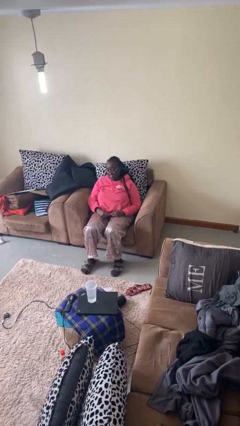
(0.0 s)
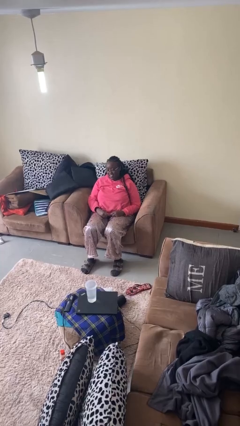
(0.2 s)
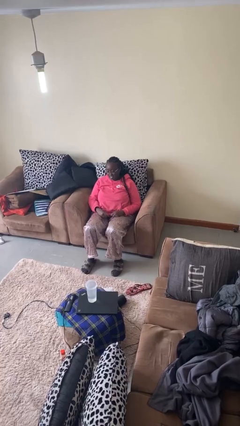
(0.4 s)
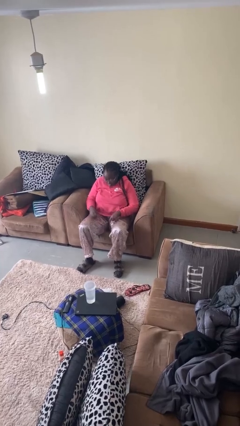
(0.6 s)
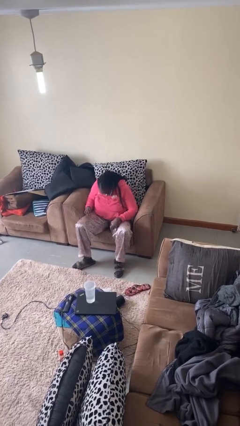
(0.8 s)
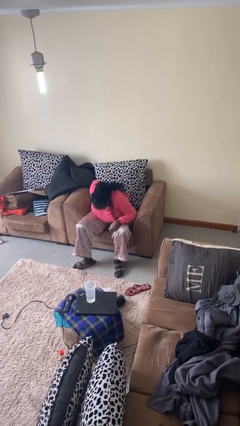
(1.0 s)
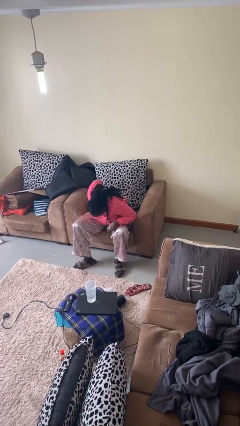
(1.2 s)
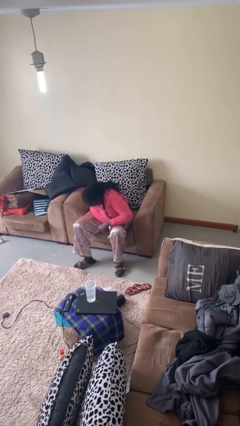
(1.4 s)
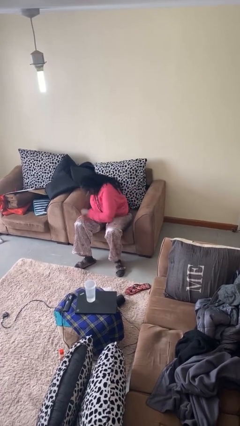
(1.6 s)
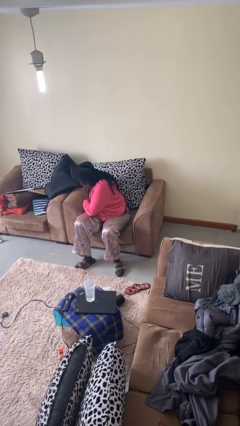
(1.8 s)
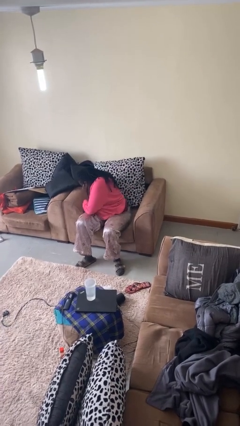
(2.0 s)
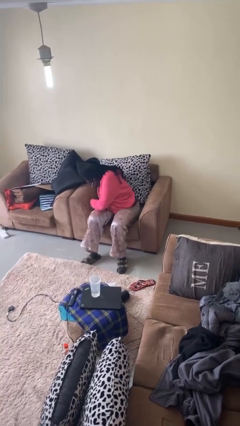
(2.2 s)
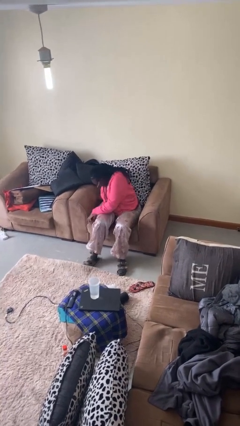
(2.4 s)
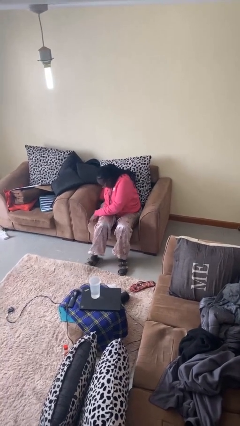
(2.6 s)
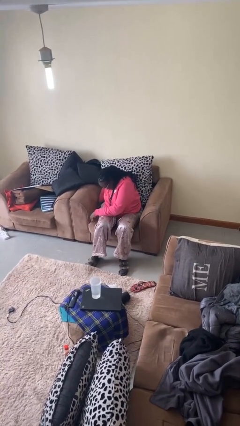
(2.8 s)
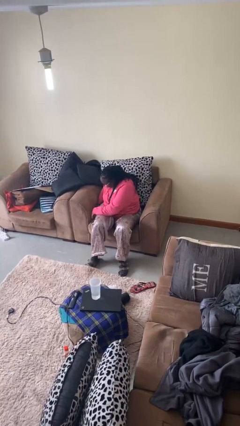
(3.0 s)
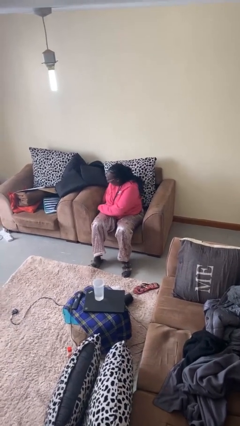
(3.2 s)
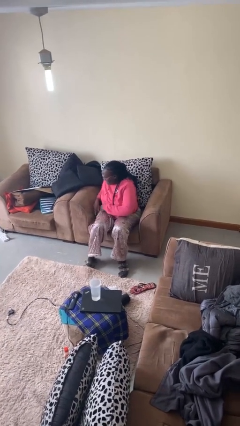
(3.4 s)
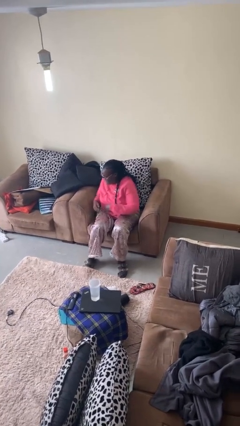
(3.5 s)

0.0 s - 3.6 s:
person searches in couch

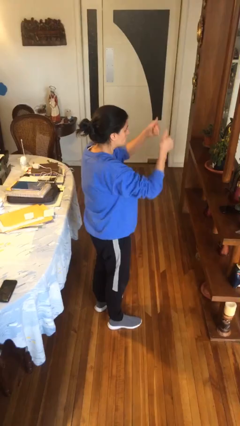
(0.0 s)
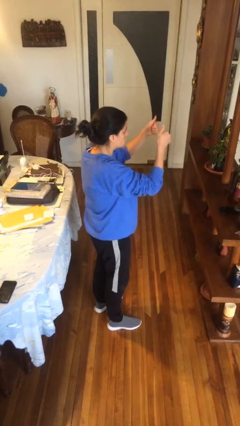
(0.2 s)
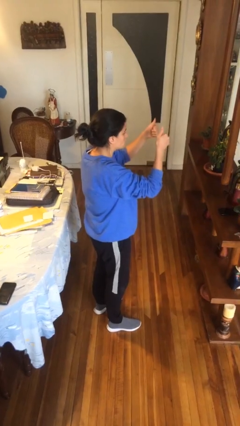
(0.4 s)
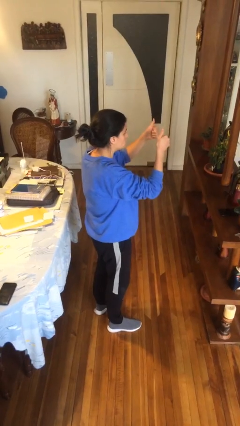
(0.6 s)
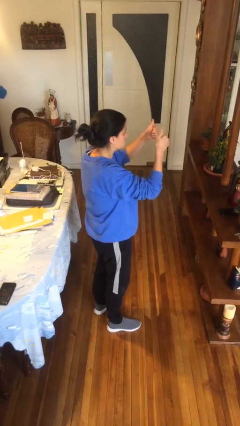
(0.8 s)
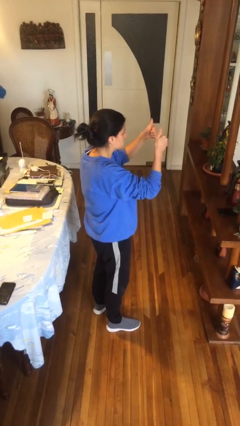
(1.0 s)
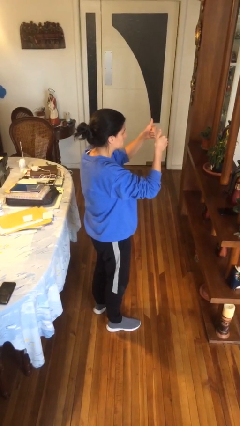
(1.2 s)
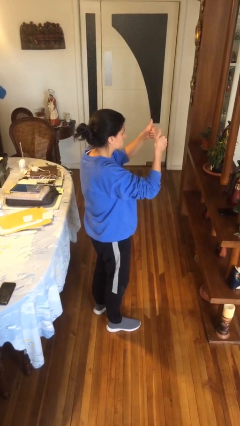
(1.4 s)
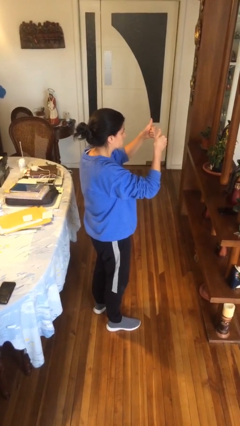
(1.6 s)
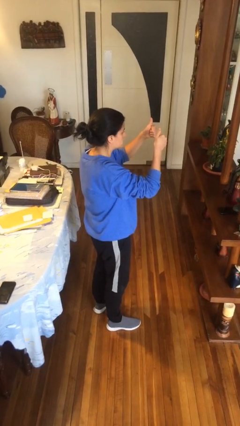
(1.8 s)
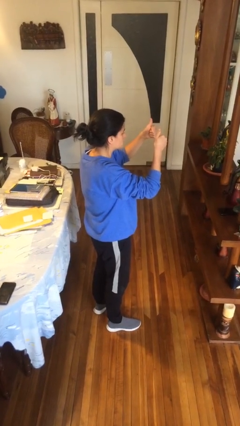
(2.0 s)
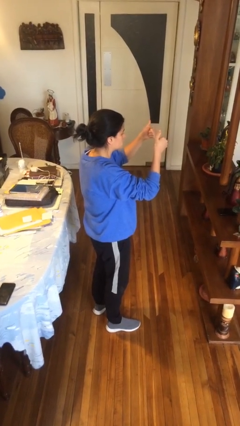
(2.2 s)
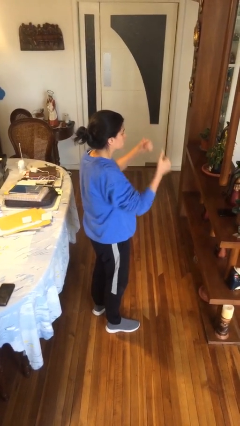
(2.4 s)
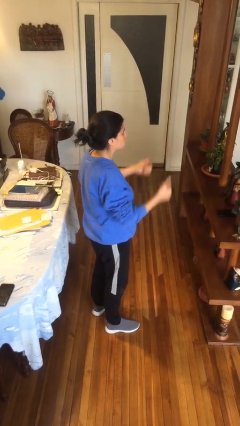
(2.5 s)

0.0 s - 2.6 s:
person gestures thumbs up

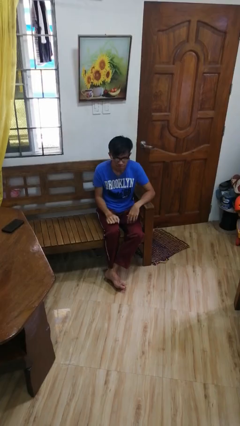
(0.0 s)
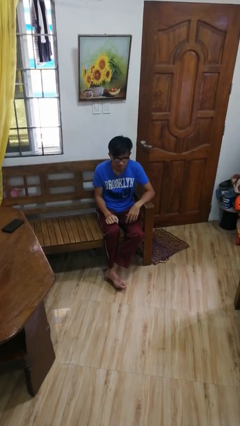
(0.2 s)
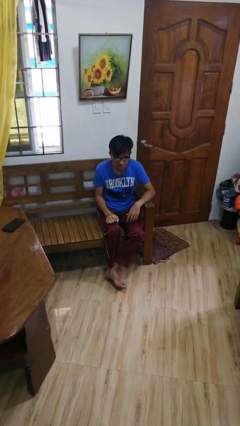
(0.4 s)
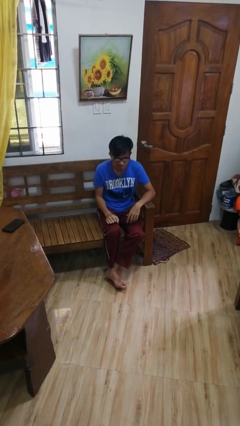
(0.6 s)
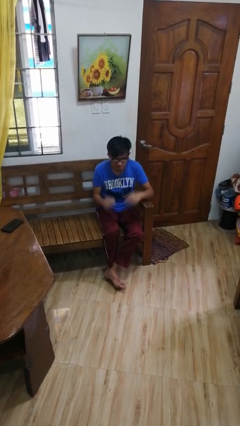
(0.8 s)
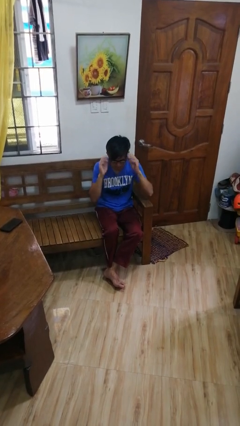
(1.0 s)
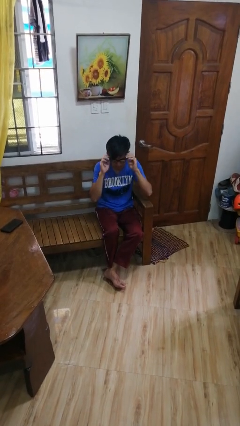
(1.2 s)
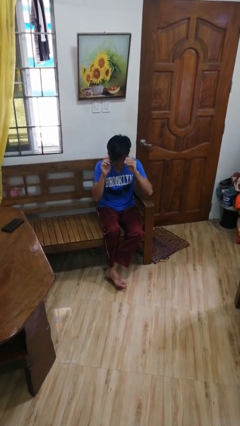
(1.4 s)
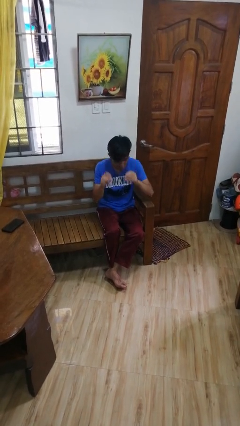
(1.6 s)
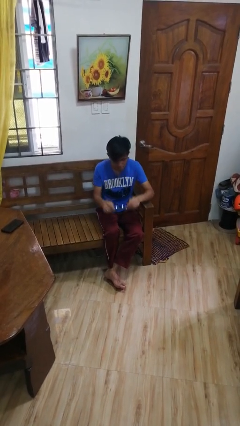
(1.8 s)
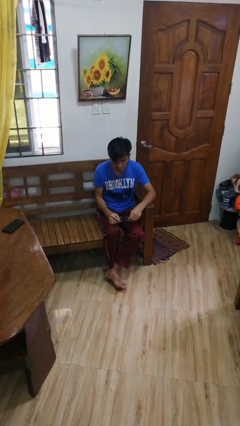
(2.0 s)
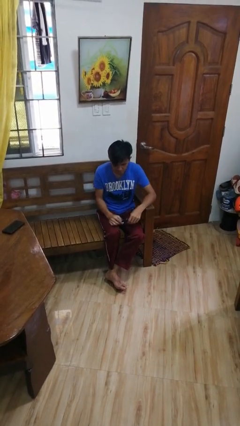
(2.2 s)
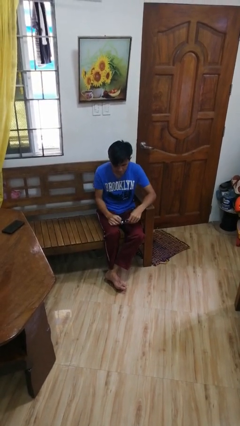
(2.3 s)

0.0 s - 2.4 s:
person takes off glasses

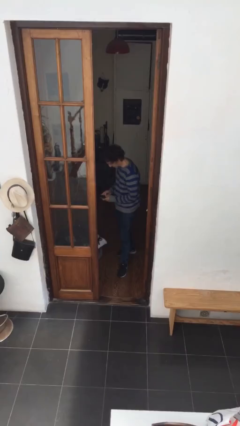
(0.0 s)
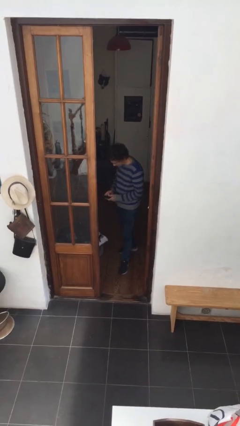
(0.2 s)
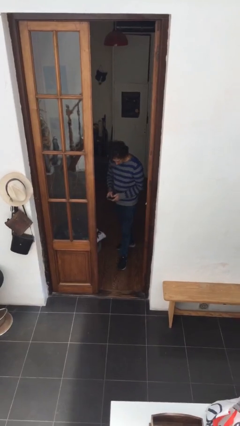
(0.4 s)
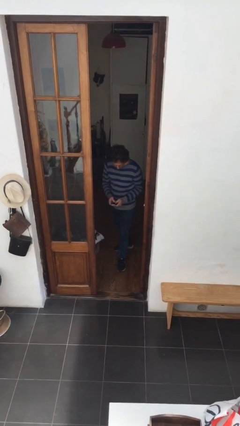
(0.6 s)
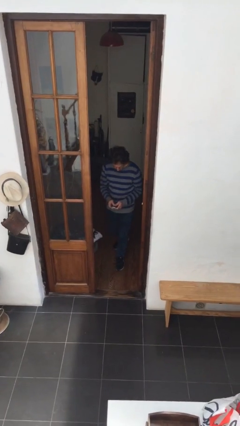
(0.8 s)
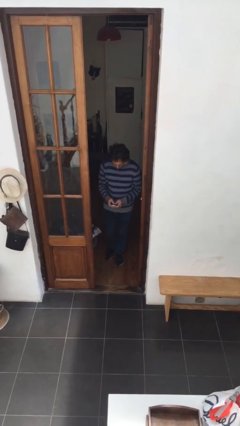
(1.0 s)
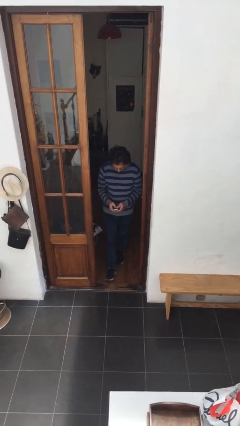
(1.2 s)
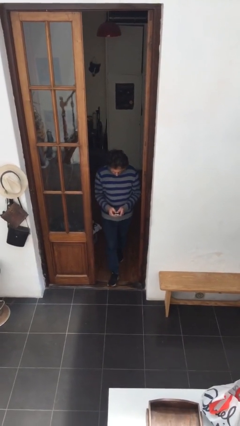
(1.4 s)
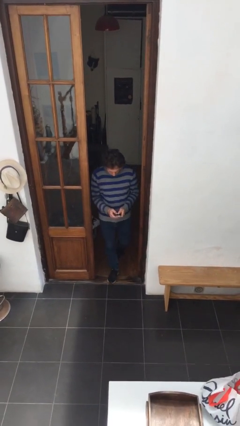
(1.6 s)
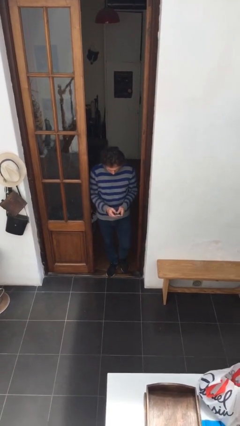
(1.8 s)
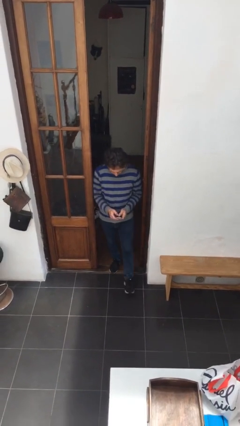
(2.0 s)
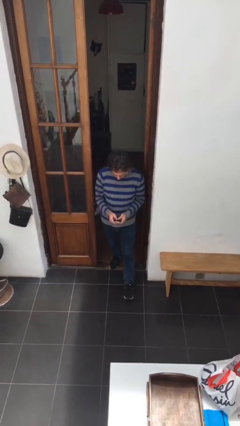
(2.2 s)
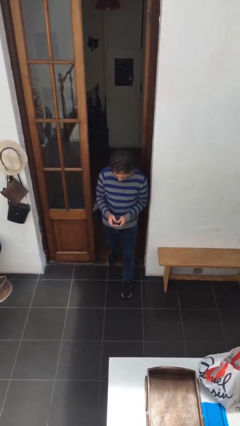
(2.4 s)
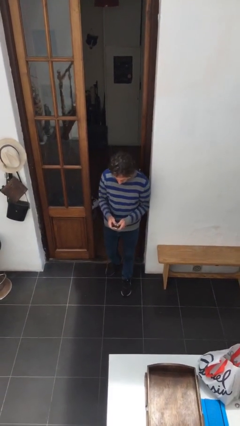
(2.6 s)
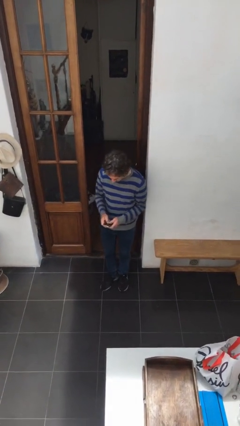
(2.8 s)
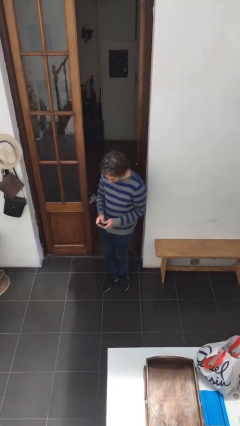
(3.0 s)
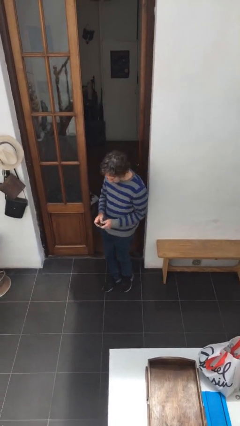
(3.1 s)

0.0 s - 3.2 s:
person enters scene through structure

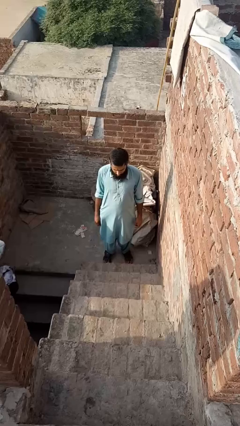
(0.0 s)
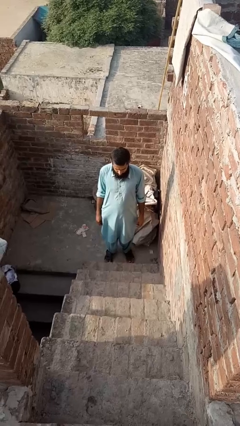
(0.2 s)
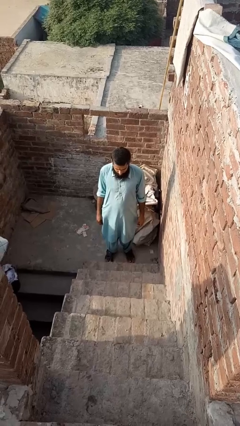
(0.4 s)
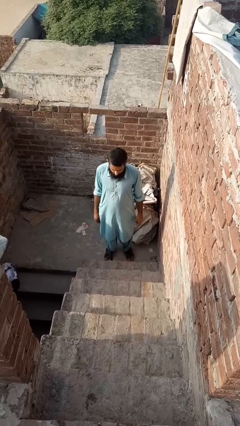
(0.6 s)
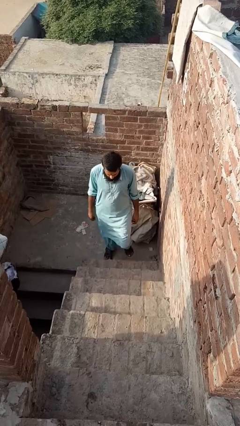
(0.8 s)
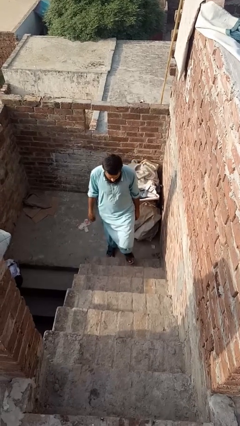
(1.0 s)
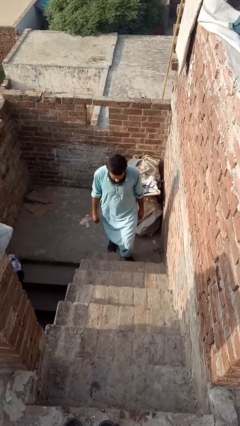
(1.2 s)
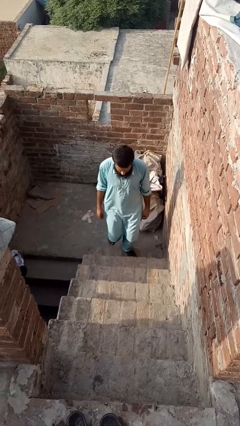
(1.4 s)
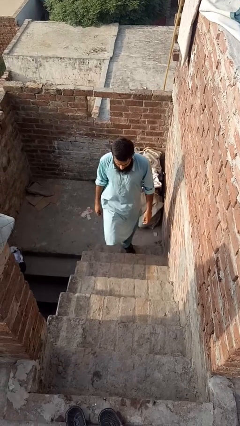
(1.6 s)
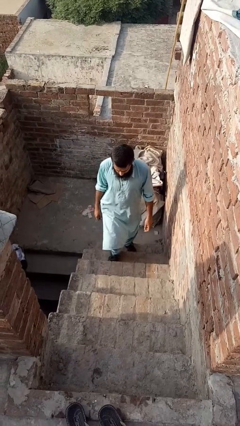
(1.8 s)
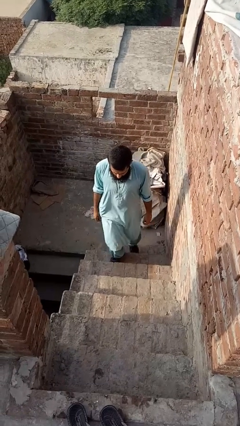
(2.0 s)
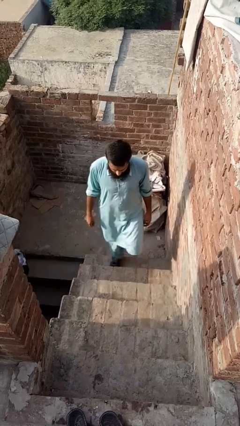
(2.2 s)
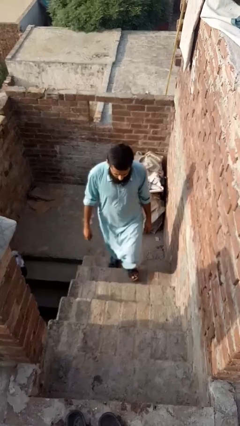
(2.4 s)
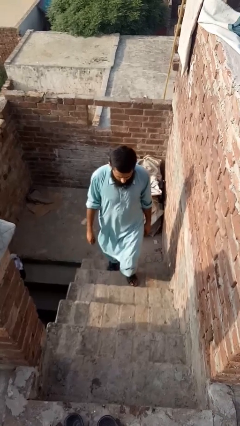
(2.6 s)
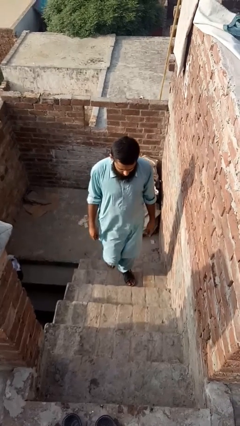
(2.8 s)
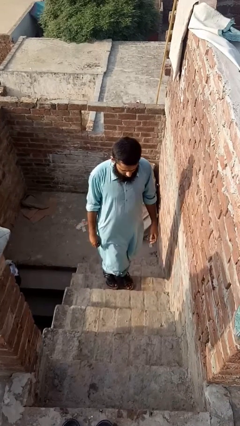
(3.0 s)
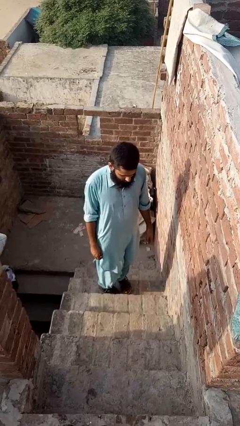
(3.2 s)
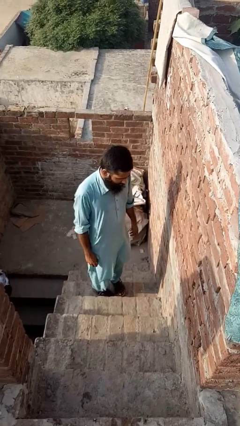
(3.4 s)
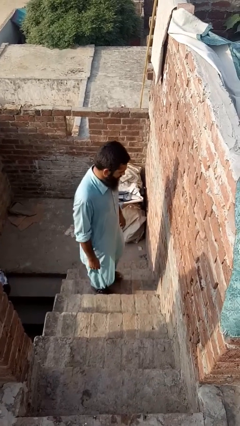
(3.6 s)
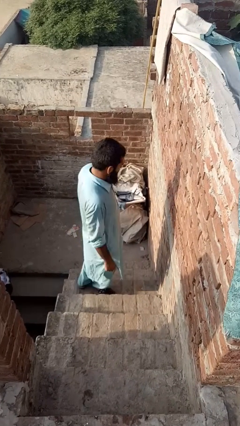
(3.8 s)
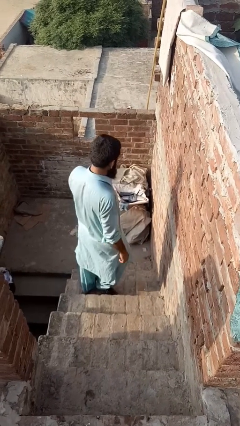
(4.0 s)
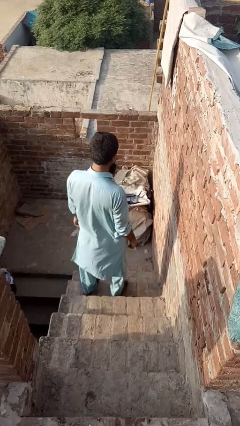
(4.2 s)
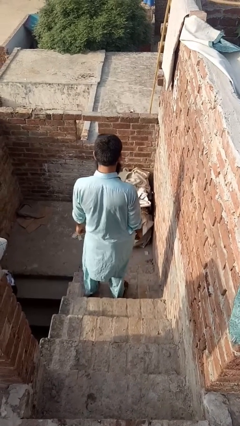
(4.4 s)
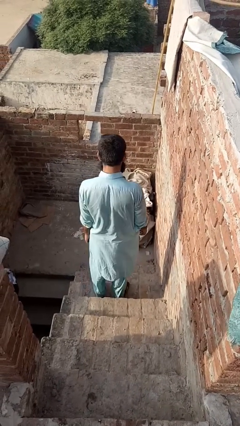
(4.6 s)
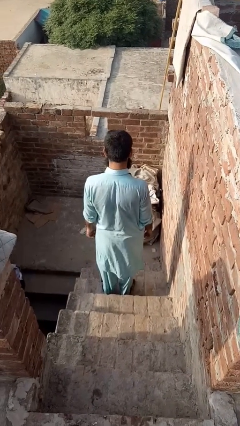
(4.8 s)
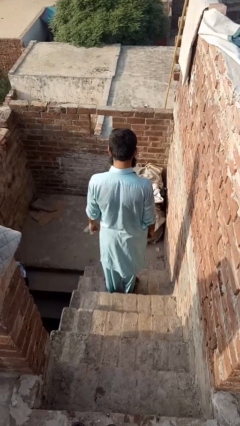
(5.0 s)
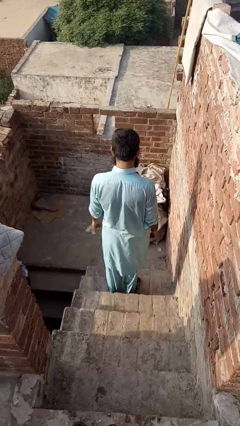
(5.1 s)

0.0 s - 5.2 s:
person climbs up ladder

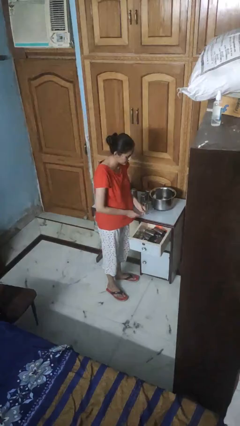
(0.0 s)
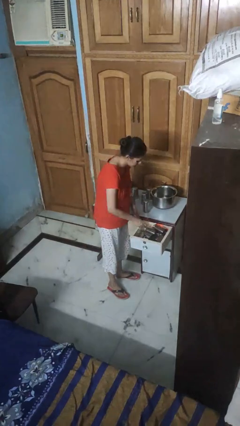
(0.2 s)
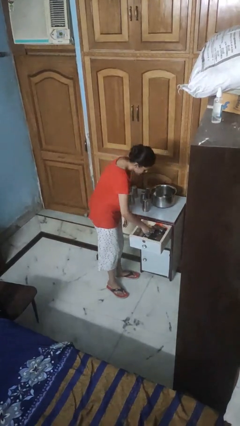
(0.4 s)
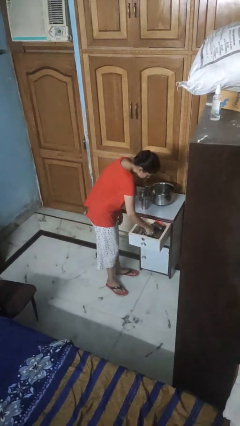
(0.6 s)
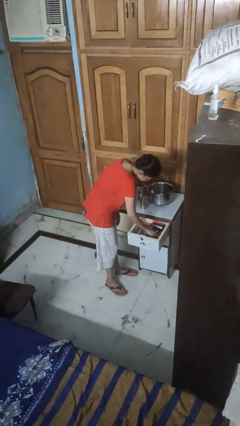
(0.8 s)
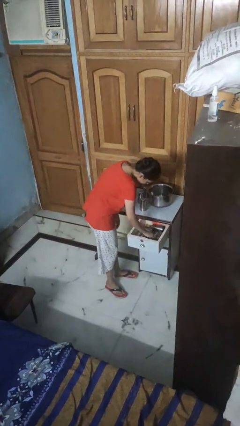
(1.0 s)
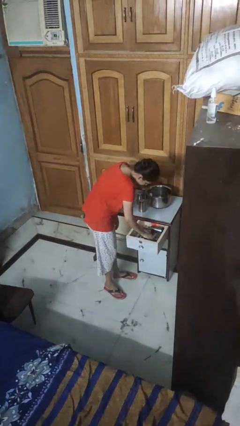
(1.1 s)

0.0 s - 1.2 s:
person puts object into kitchen drawer
